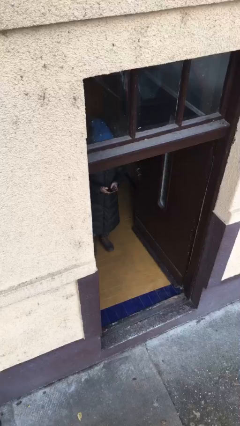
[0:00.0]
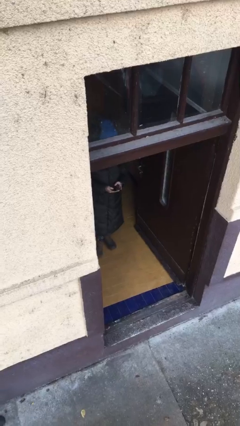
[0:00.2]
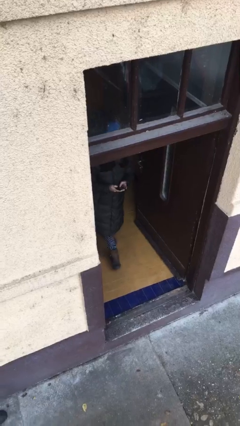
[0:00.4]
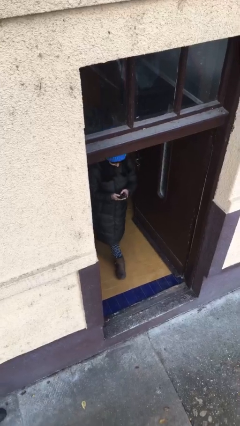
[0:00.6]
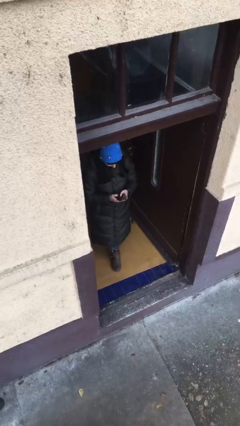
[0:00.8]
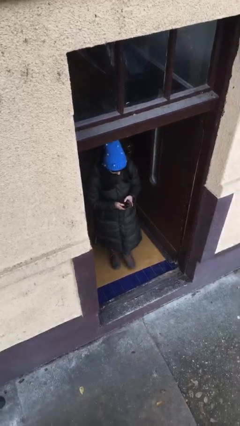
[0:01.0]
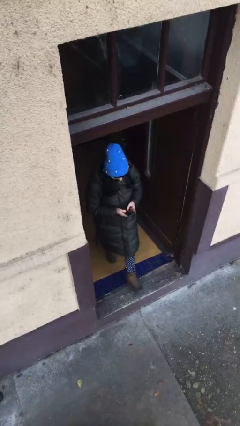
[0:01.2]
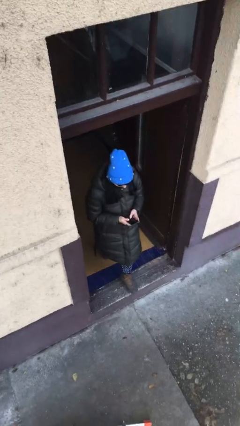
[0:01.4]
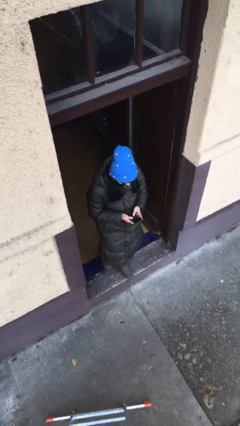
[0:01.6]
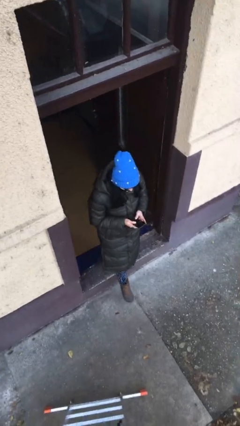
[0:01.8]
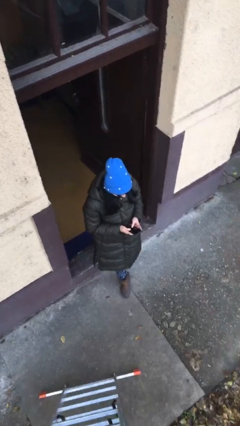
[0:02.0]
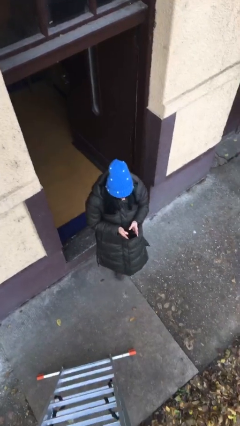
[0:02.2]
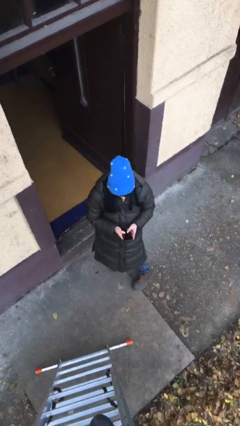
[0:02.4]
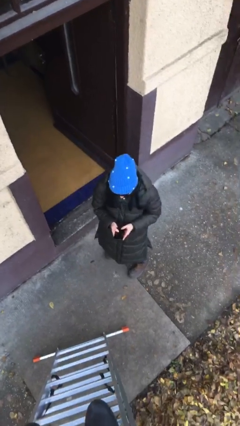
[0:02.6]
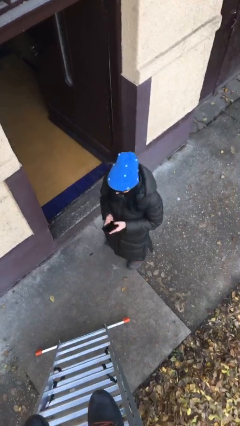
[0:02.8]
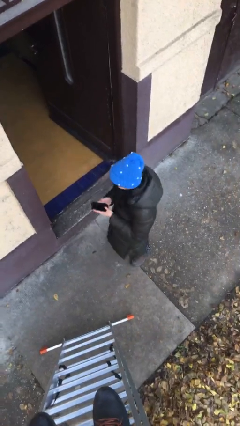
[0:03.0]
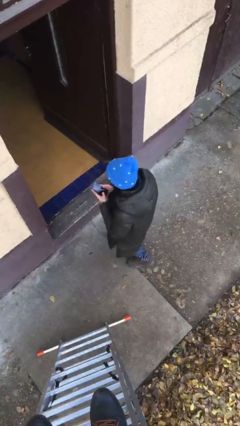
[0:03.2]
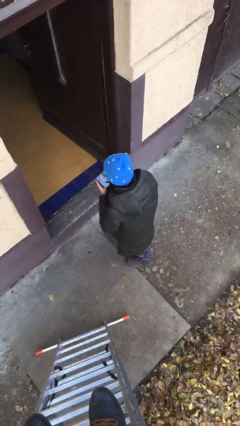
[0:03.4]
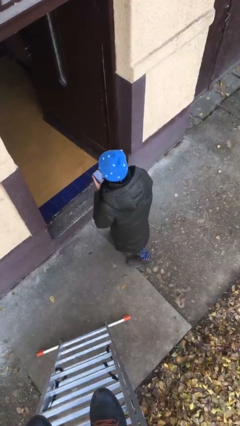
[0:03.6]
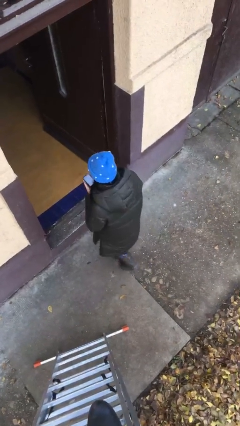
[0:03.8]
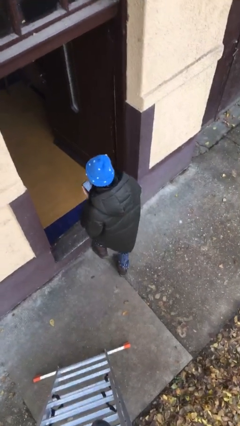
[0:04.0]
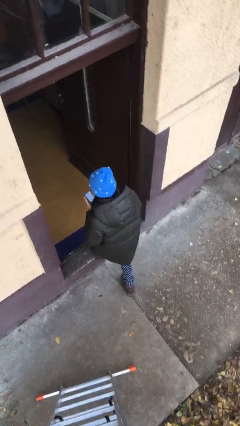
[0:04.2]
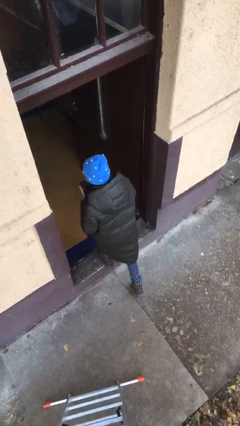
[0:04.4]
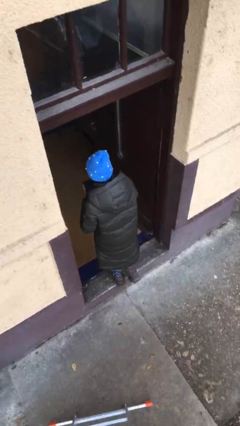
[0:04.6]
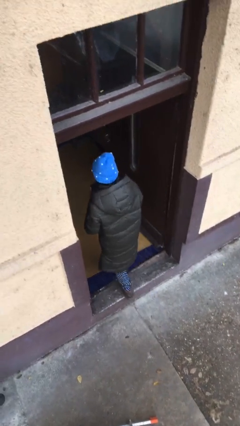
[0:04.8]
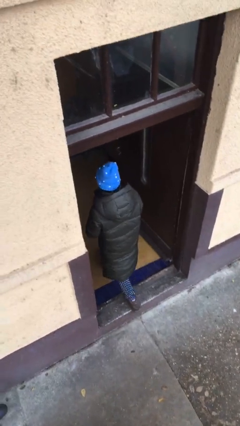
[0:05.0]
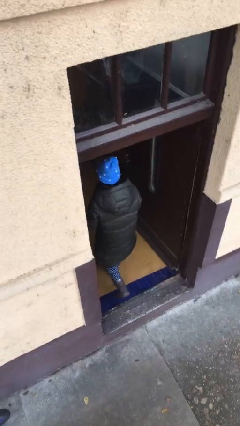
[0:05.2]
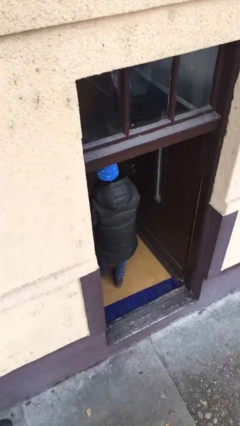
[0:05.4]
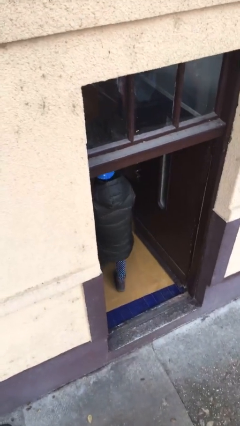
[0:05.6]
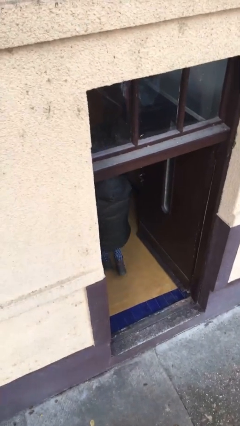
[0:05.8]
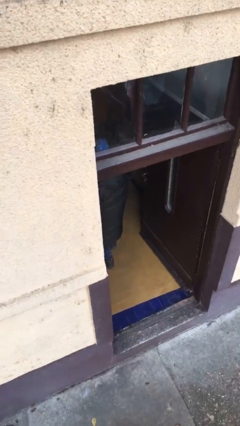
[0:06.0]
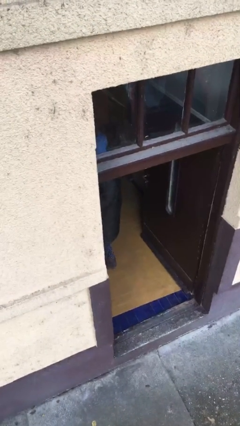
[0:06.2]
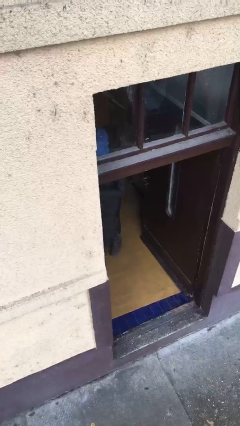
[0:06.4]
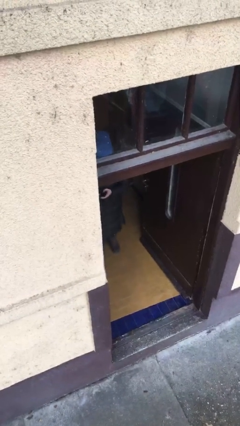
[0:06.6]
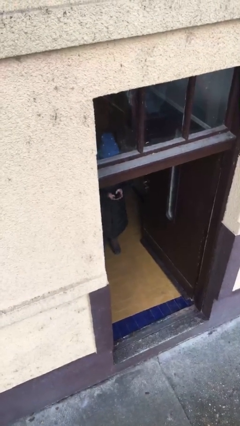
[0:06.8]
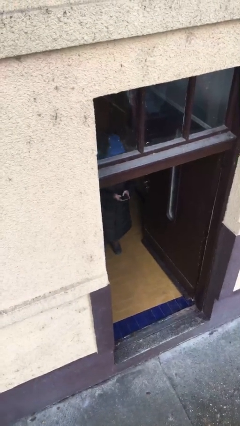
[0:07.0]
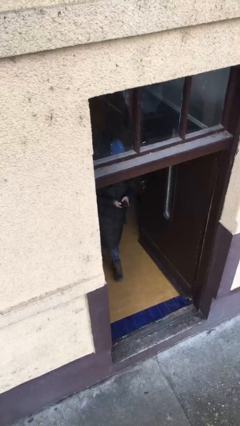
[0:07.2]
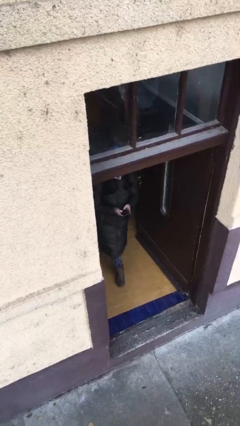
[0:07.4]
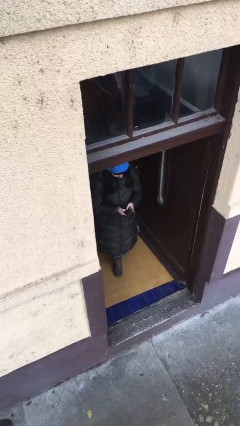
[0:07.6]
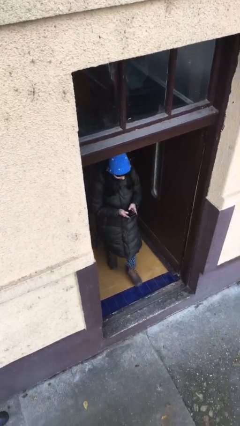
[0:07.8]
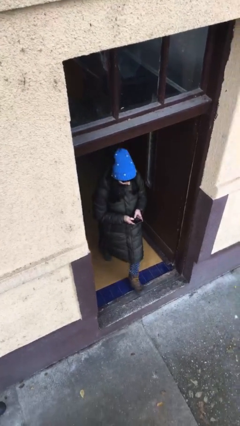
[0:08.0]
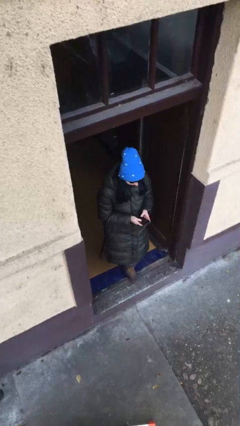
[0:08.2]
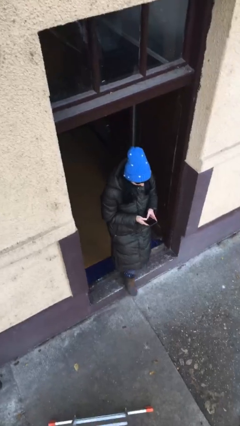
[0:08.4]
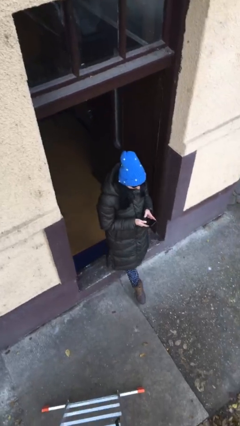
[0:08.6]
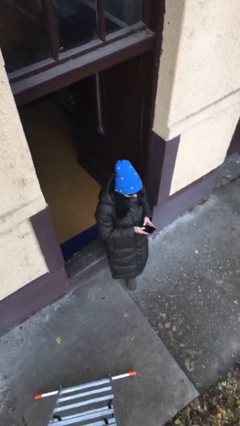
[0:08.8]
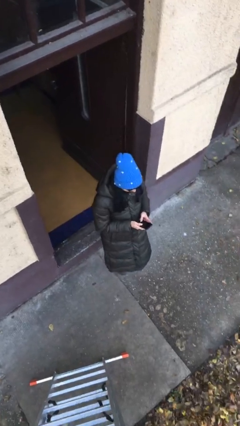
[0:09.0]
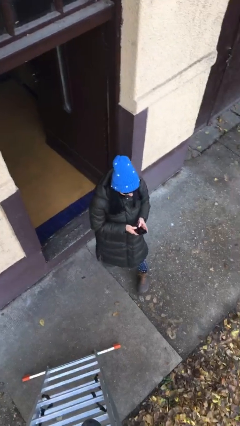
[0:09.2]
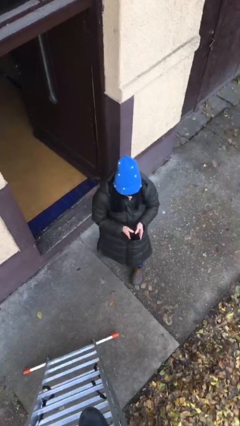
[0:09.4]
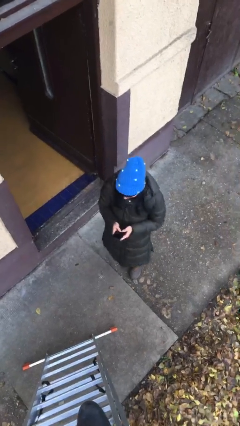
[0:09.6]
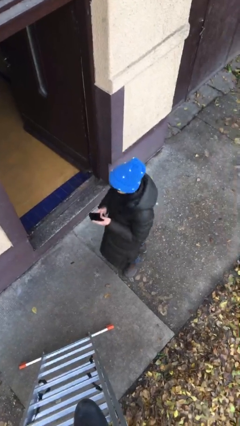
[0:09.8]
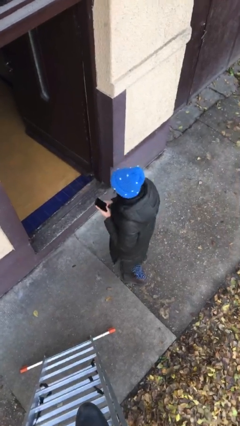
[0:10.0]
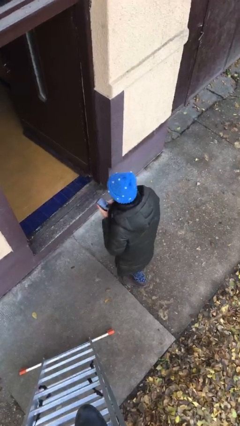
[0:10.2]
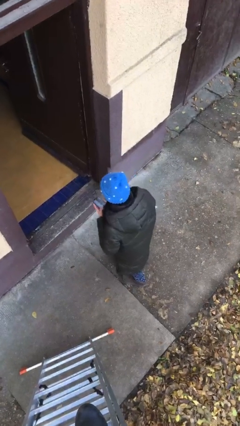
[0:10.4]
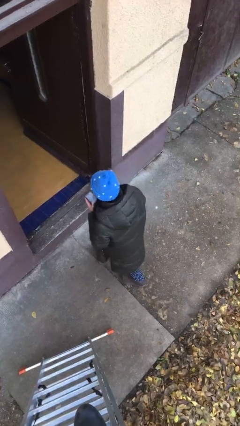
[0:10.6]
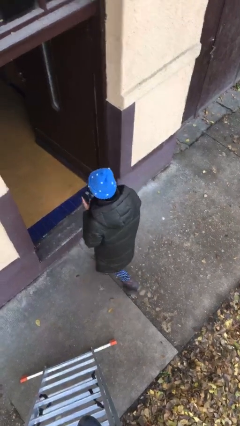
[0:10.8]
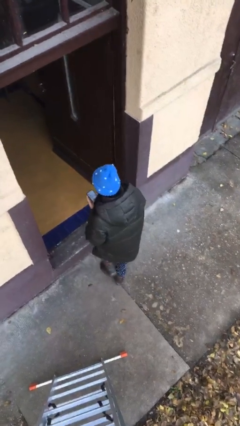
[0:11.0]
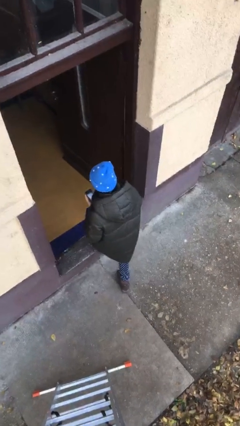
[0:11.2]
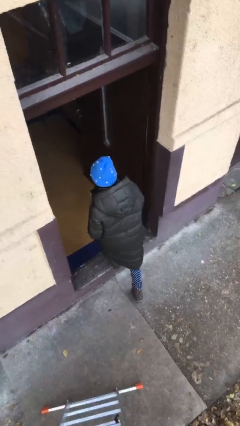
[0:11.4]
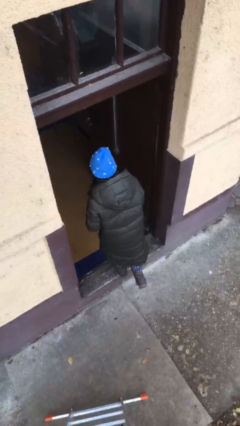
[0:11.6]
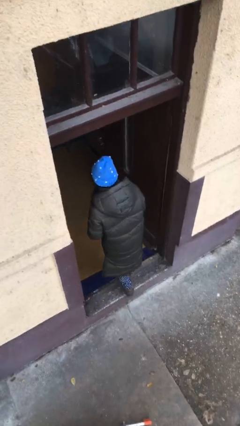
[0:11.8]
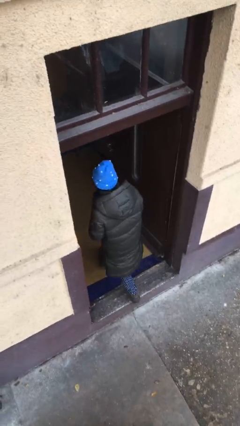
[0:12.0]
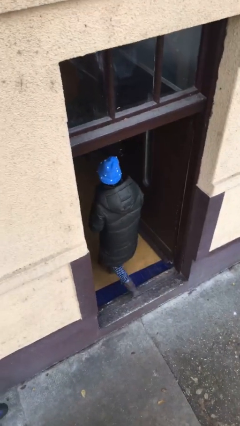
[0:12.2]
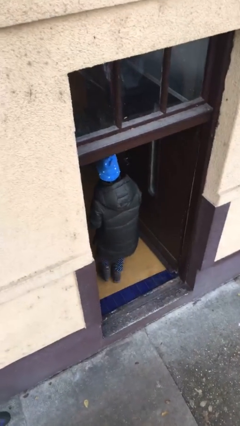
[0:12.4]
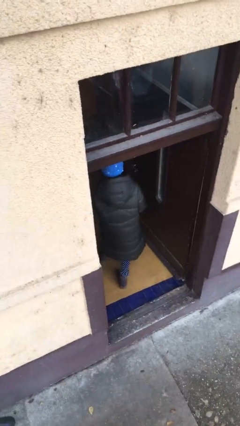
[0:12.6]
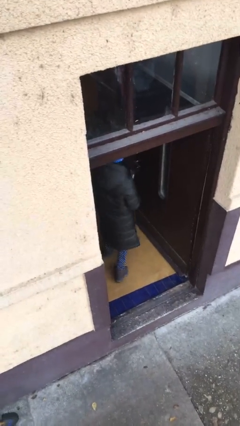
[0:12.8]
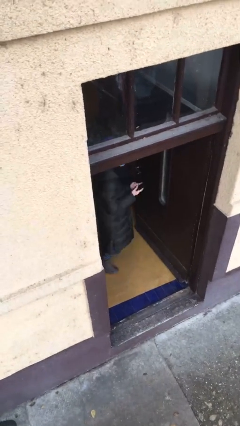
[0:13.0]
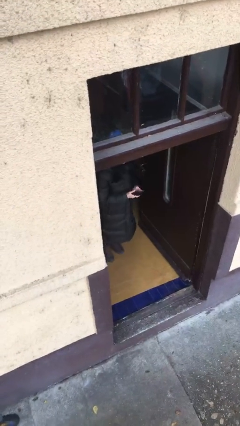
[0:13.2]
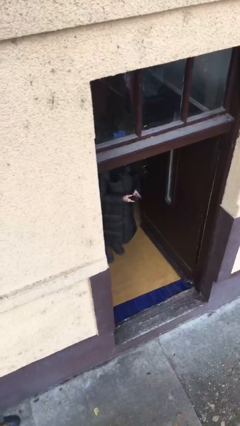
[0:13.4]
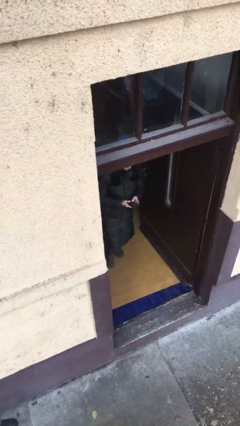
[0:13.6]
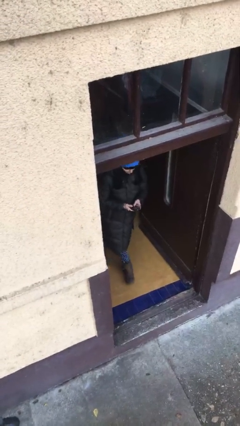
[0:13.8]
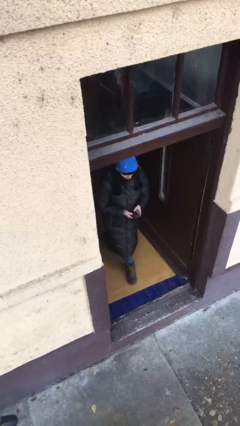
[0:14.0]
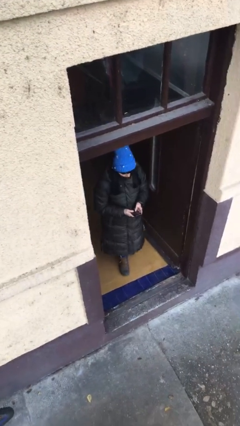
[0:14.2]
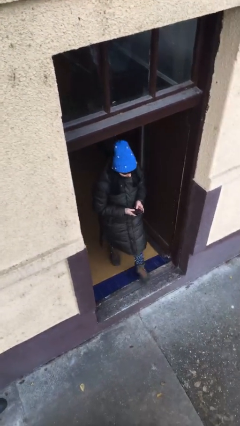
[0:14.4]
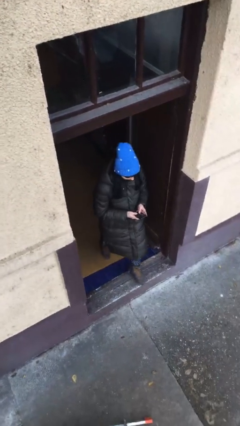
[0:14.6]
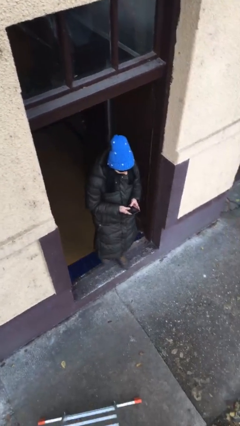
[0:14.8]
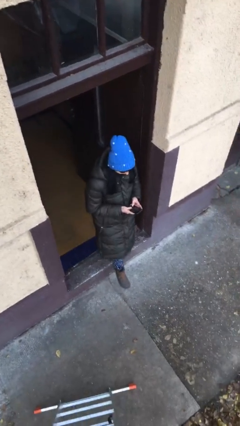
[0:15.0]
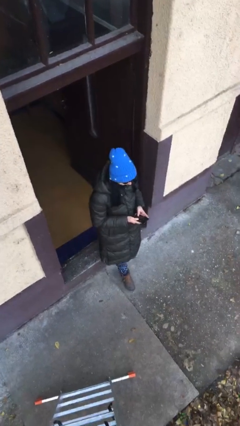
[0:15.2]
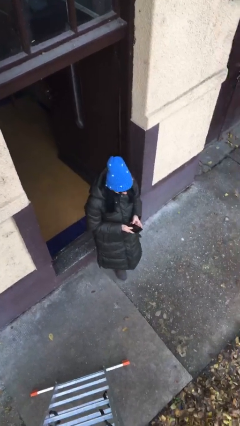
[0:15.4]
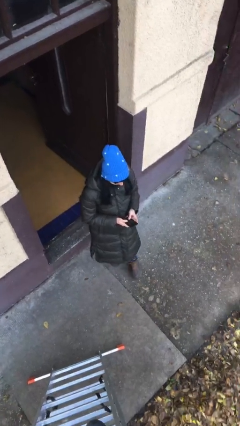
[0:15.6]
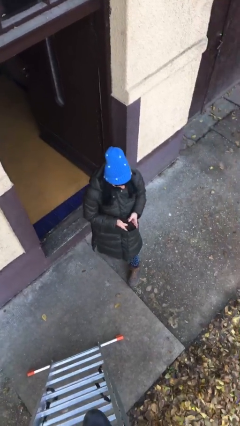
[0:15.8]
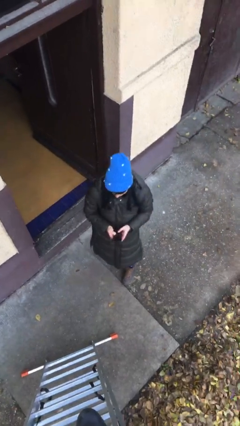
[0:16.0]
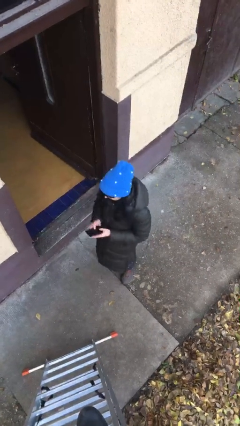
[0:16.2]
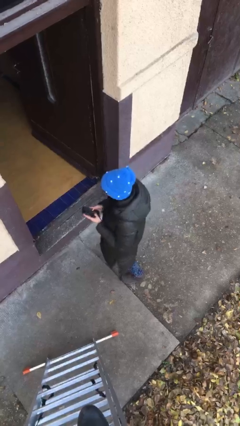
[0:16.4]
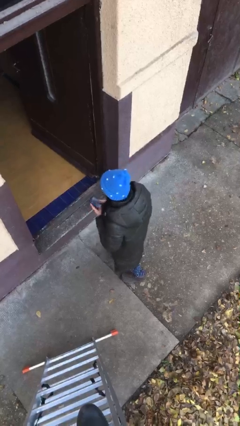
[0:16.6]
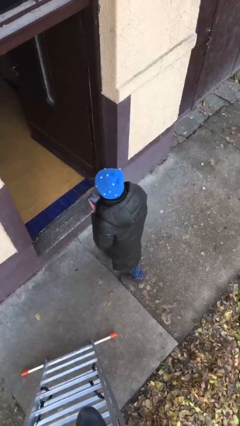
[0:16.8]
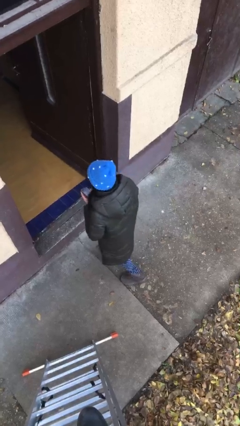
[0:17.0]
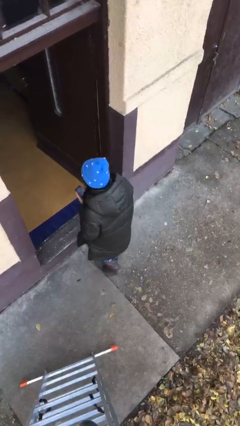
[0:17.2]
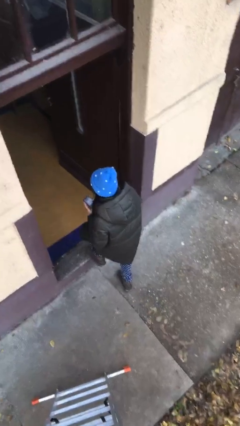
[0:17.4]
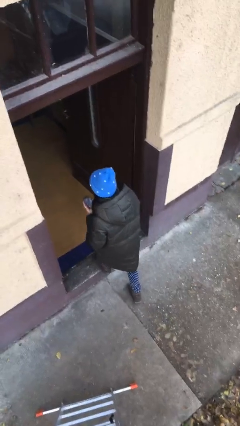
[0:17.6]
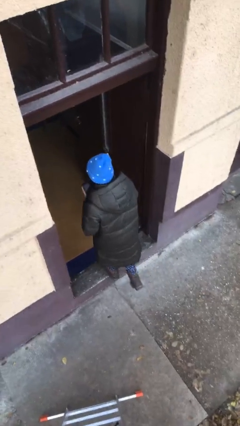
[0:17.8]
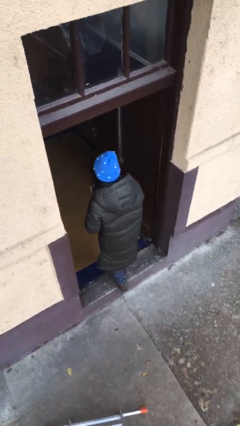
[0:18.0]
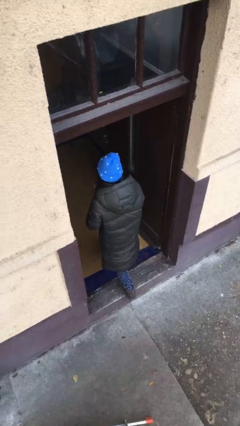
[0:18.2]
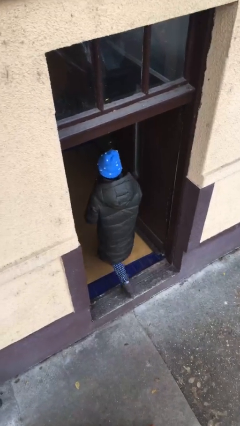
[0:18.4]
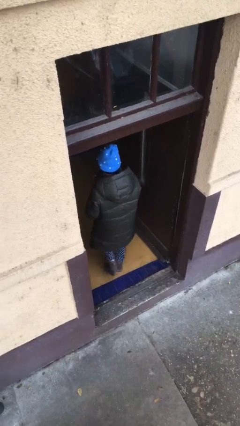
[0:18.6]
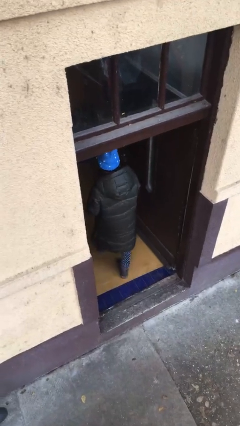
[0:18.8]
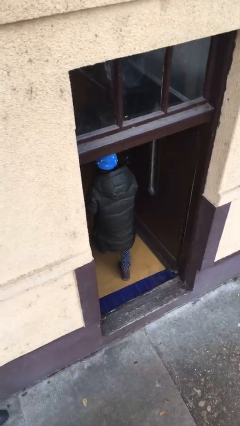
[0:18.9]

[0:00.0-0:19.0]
person texts on phone
